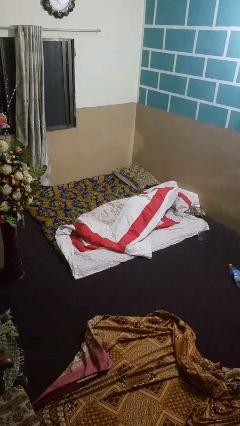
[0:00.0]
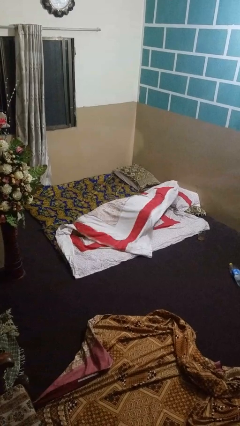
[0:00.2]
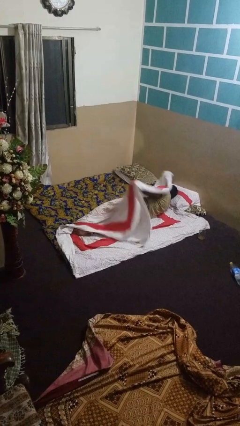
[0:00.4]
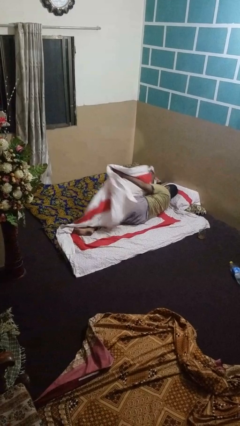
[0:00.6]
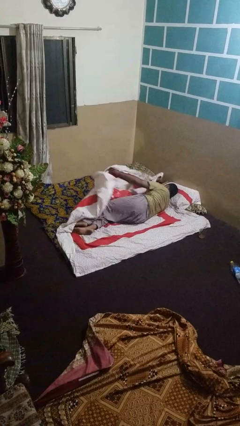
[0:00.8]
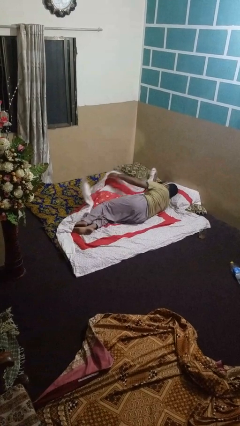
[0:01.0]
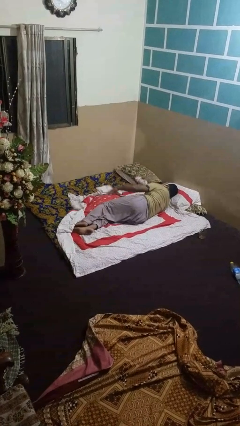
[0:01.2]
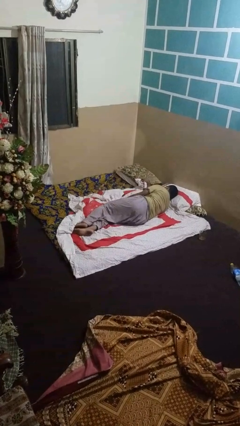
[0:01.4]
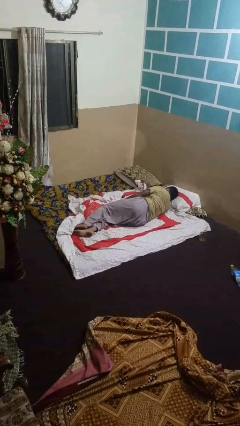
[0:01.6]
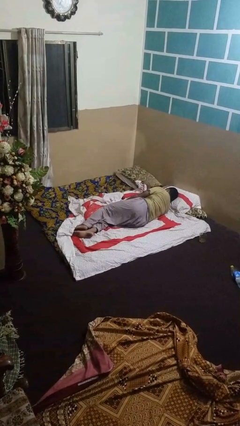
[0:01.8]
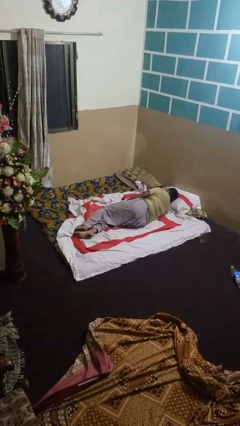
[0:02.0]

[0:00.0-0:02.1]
person uncovers with bedsheets

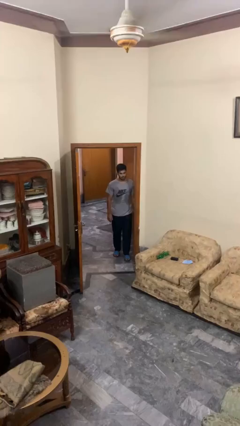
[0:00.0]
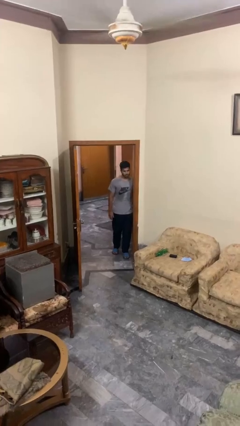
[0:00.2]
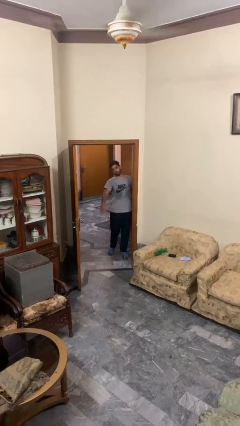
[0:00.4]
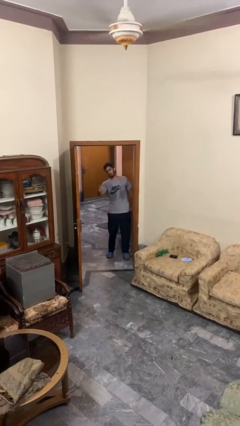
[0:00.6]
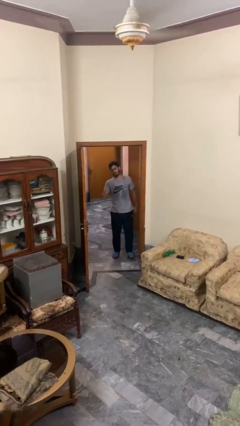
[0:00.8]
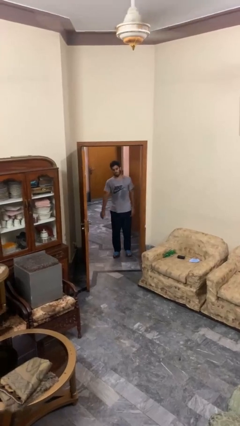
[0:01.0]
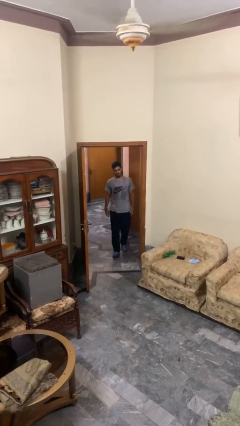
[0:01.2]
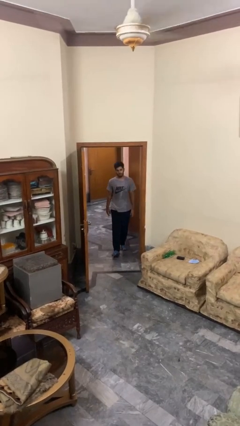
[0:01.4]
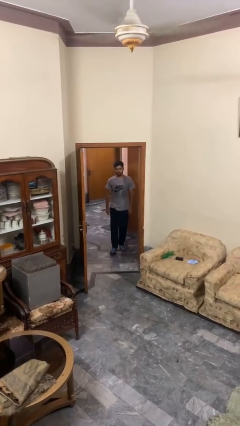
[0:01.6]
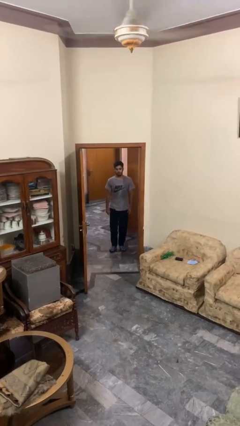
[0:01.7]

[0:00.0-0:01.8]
person bumps into wall

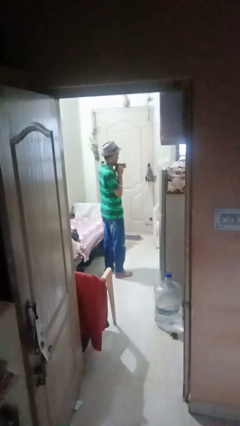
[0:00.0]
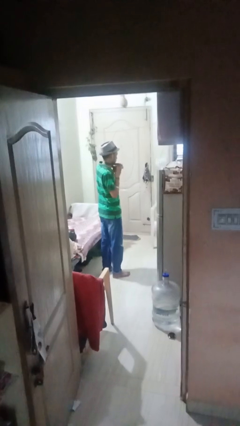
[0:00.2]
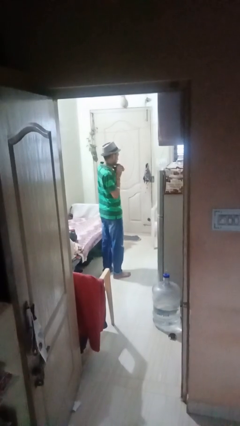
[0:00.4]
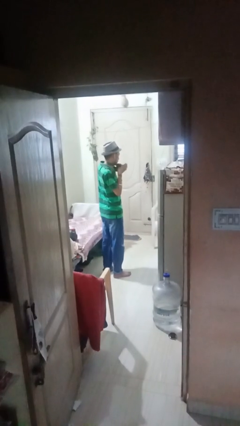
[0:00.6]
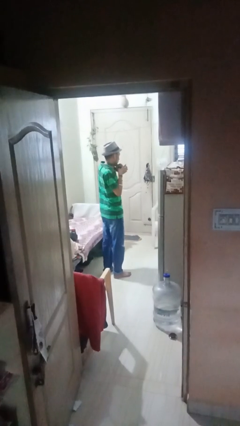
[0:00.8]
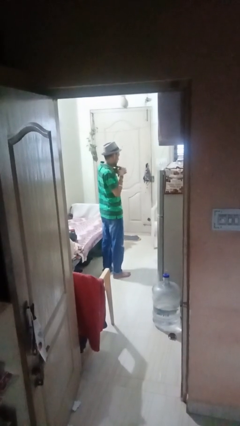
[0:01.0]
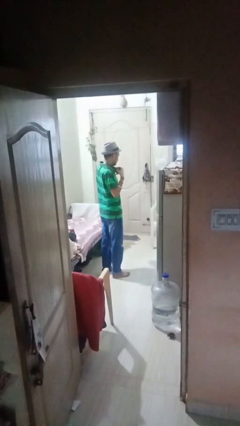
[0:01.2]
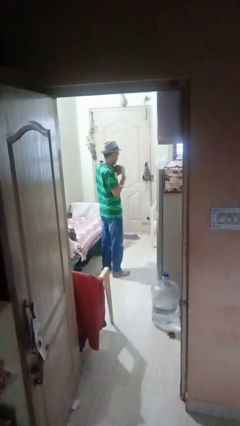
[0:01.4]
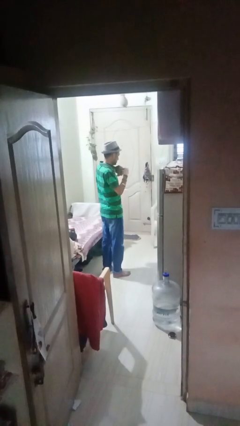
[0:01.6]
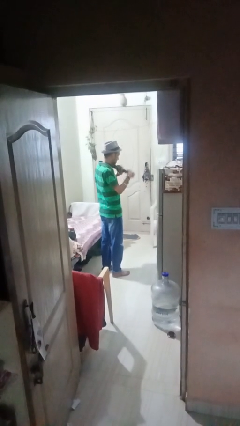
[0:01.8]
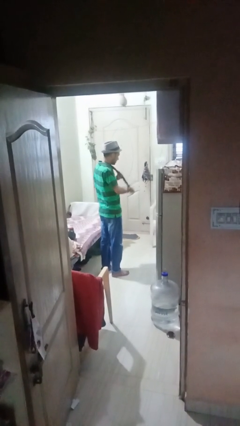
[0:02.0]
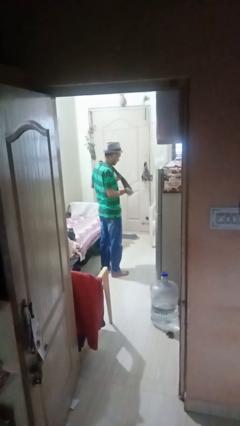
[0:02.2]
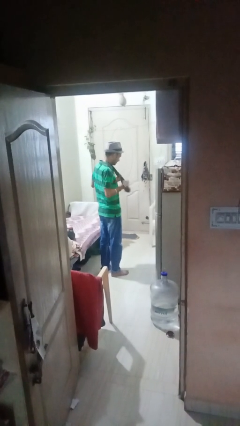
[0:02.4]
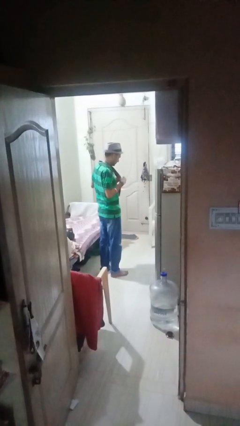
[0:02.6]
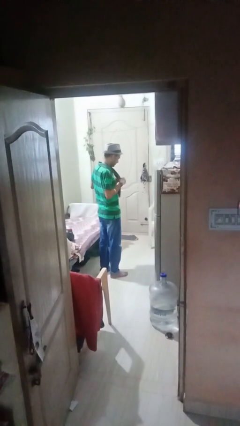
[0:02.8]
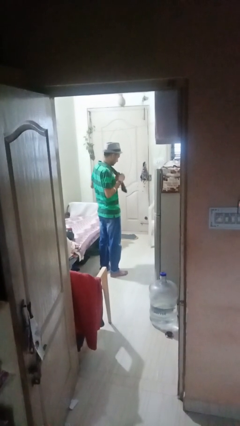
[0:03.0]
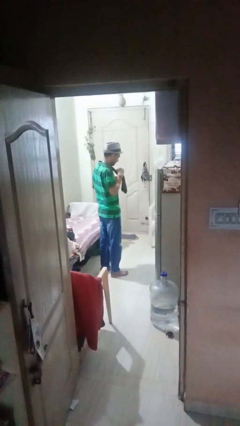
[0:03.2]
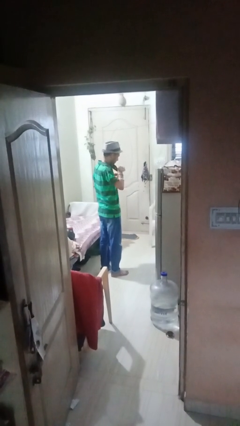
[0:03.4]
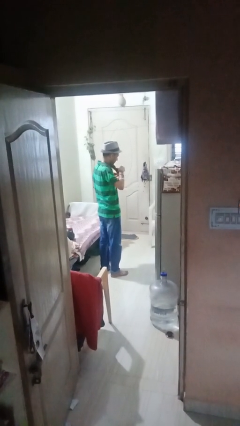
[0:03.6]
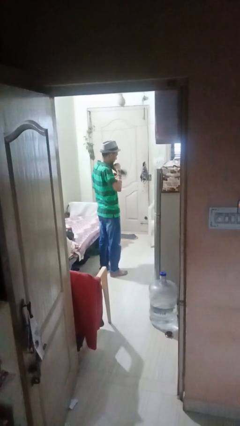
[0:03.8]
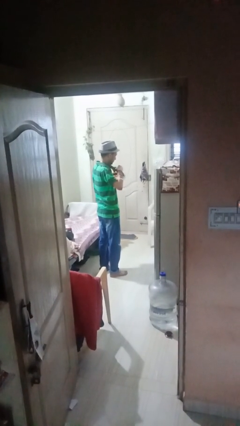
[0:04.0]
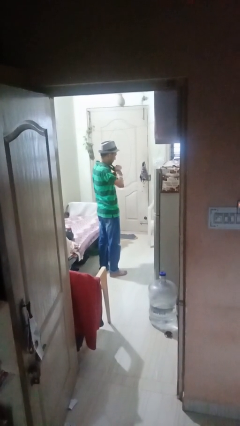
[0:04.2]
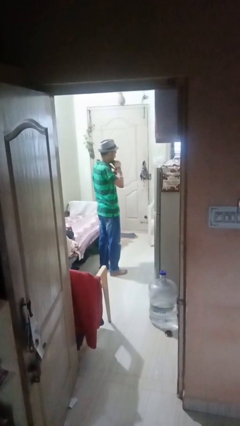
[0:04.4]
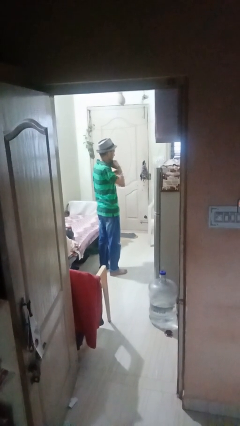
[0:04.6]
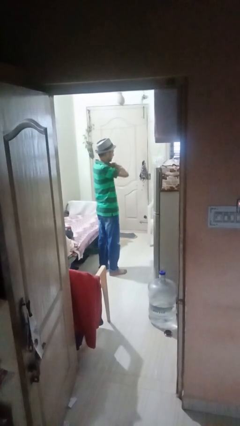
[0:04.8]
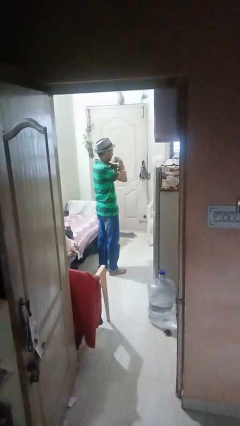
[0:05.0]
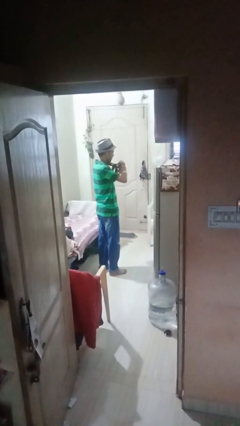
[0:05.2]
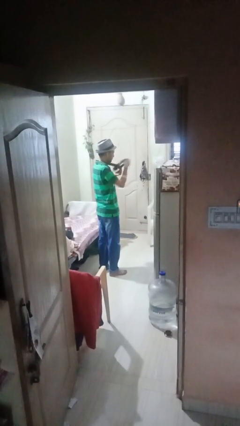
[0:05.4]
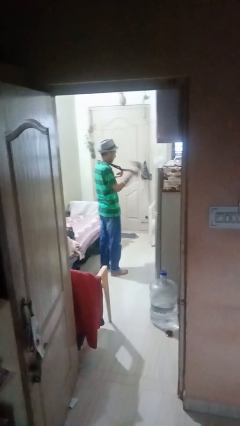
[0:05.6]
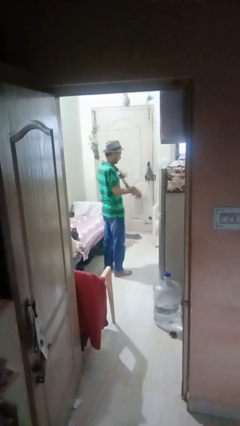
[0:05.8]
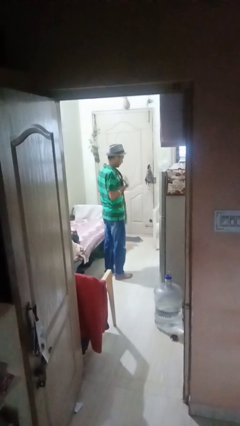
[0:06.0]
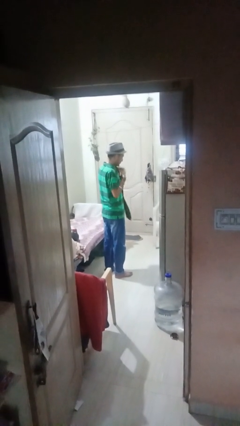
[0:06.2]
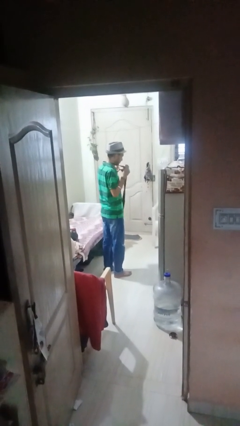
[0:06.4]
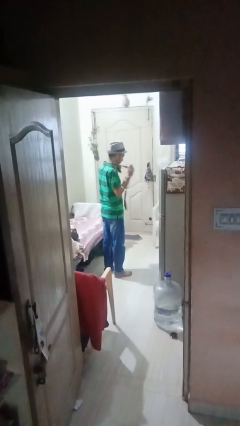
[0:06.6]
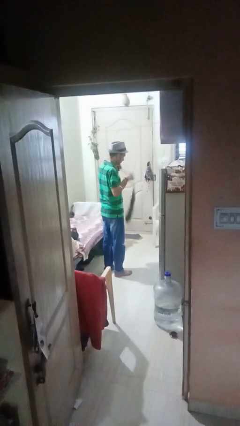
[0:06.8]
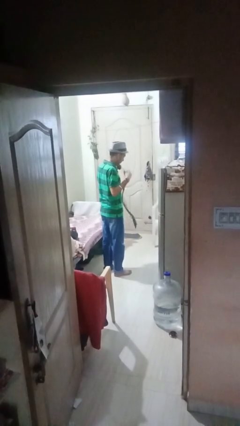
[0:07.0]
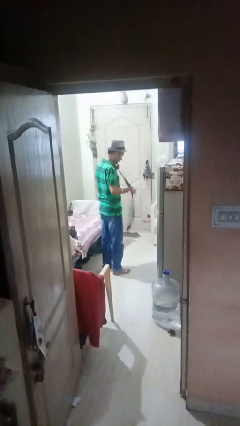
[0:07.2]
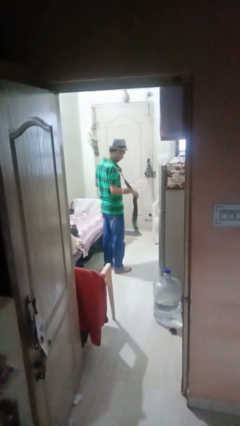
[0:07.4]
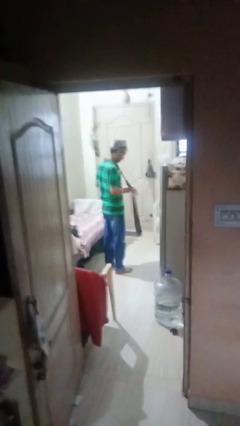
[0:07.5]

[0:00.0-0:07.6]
person takes off necktie

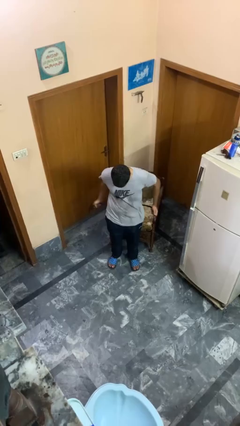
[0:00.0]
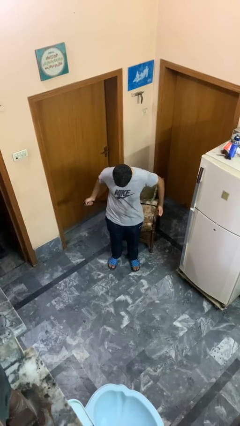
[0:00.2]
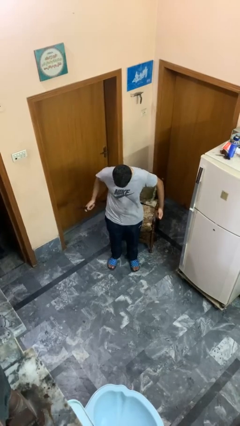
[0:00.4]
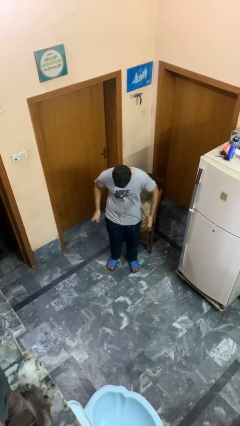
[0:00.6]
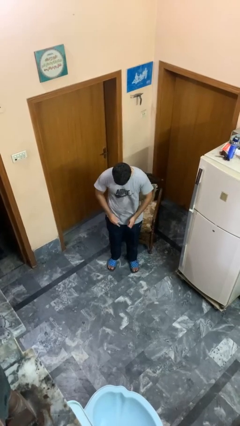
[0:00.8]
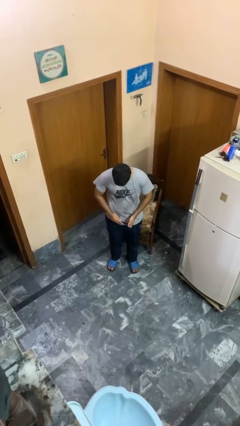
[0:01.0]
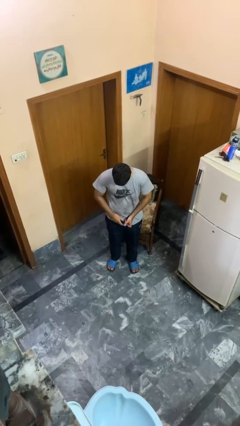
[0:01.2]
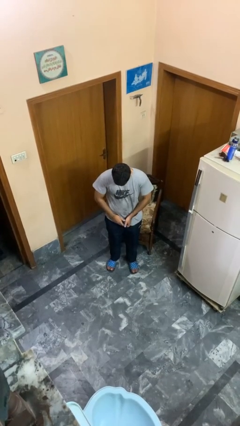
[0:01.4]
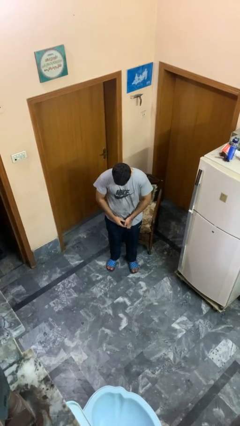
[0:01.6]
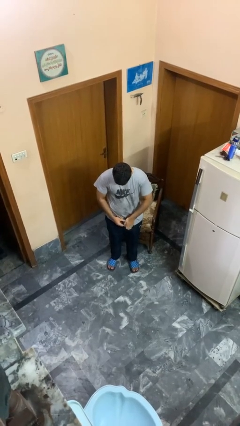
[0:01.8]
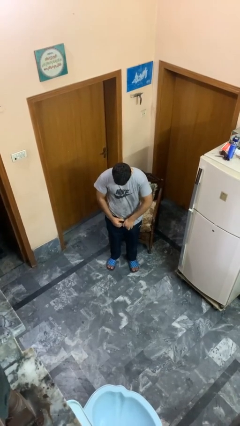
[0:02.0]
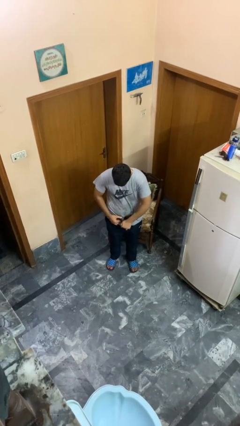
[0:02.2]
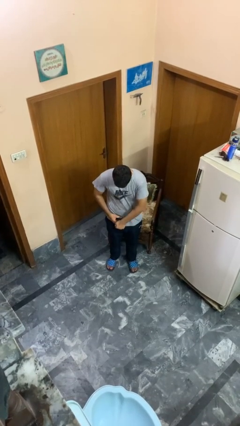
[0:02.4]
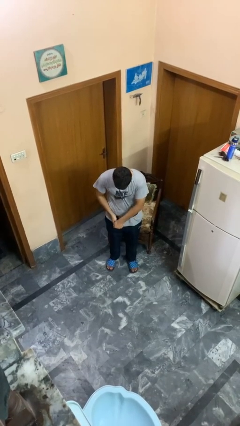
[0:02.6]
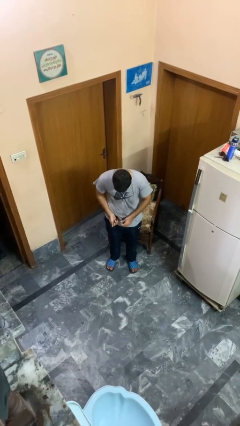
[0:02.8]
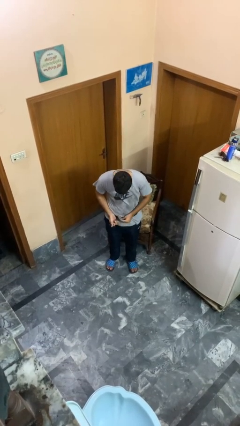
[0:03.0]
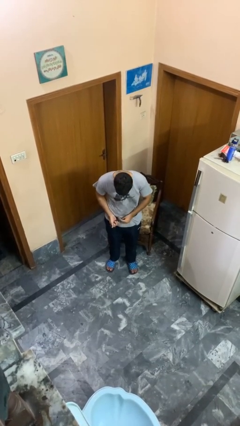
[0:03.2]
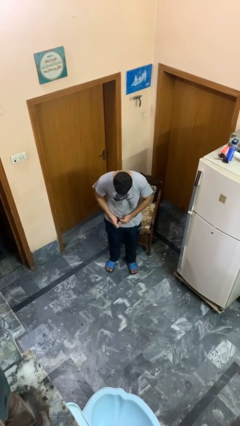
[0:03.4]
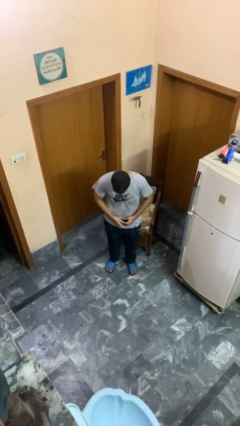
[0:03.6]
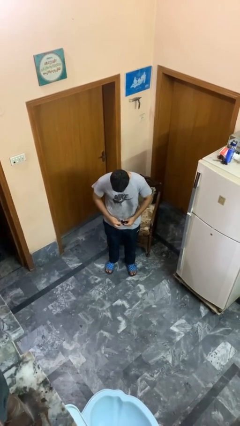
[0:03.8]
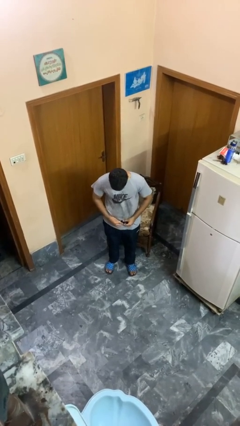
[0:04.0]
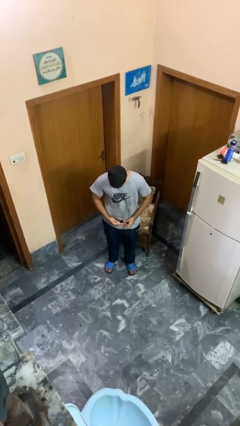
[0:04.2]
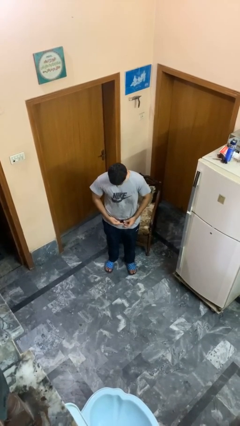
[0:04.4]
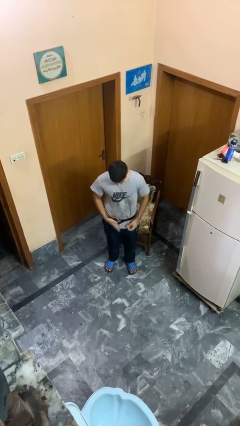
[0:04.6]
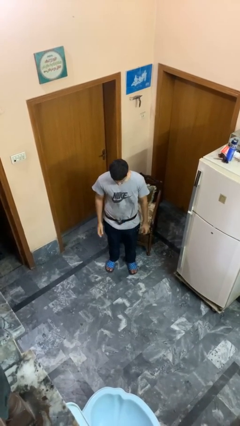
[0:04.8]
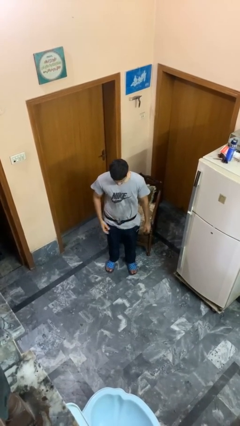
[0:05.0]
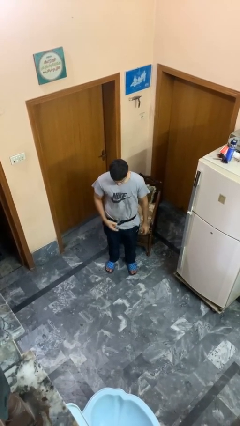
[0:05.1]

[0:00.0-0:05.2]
person puts on belt

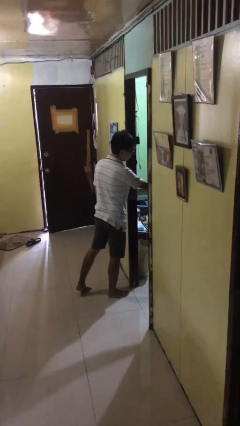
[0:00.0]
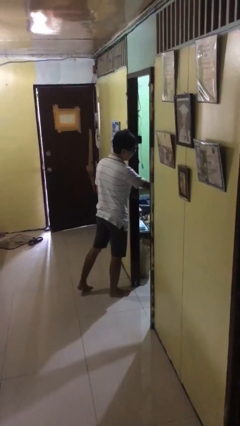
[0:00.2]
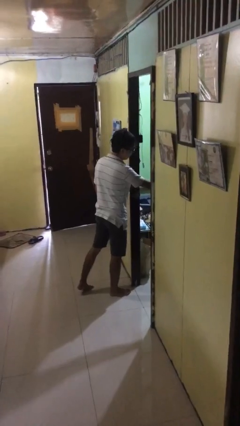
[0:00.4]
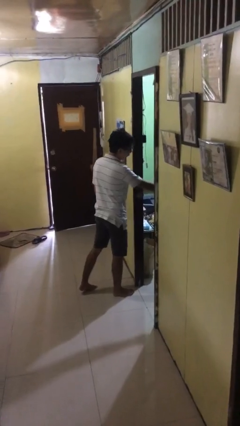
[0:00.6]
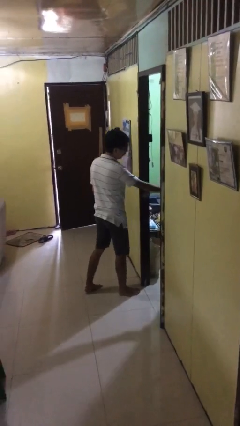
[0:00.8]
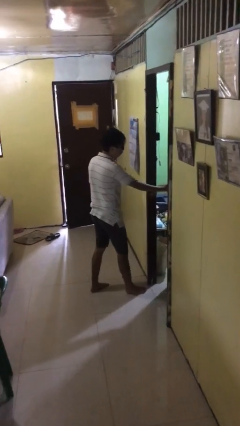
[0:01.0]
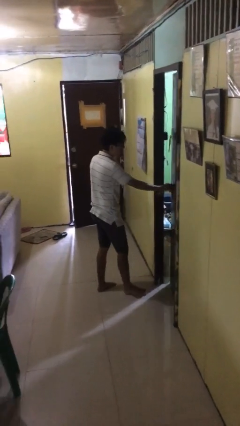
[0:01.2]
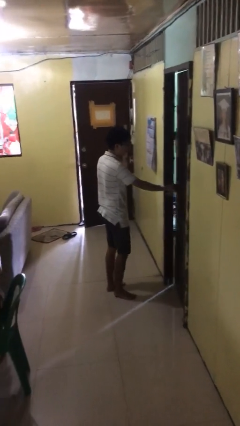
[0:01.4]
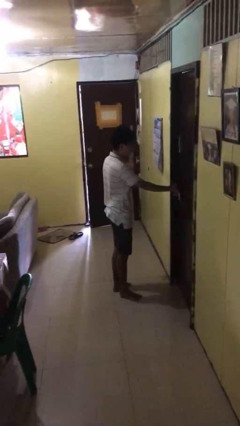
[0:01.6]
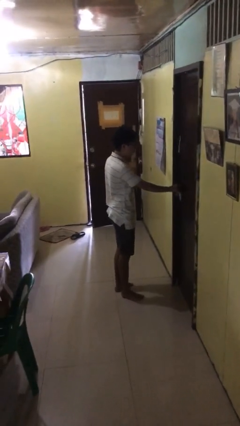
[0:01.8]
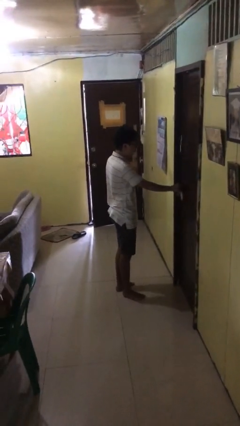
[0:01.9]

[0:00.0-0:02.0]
person closes facility door
